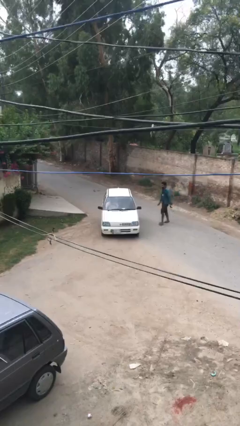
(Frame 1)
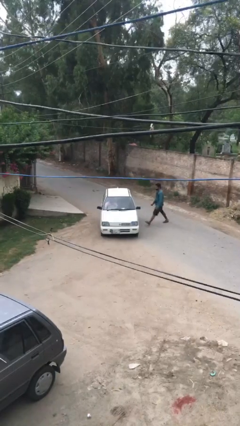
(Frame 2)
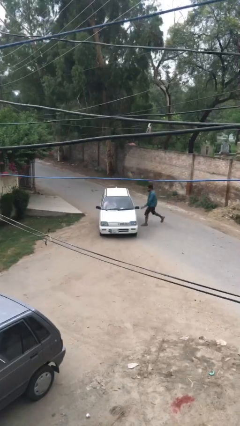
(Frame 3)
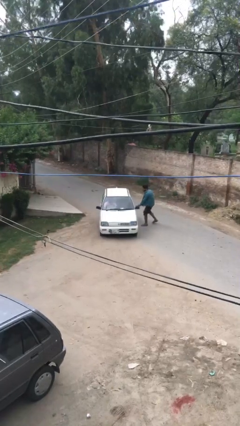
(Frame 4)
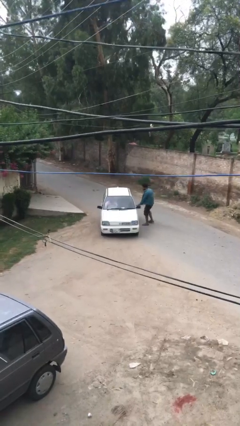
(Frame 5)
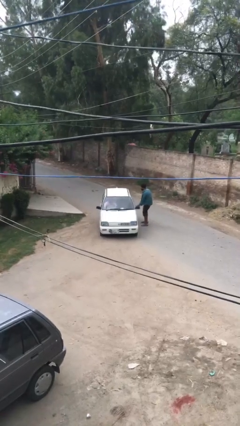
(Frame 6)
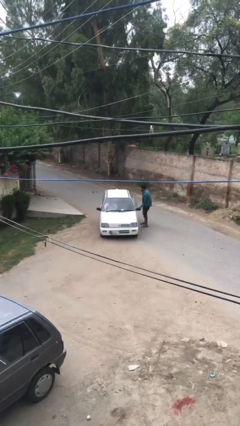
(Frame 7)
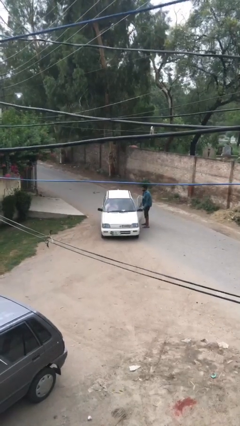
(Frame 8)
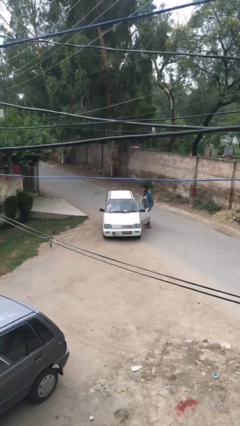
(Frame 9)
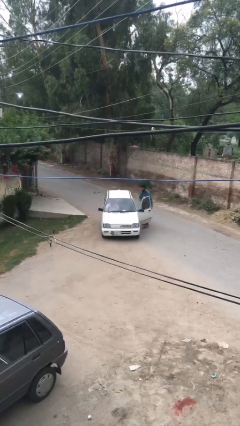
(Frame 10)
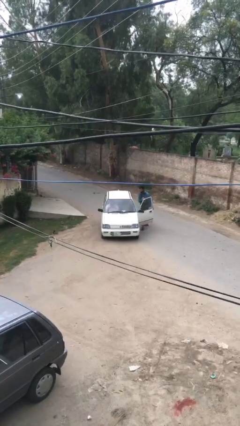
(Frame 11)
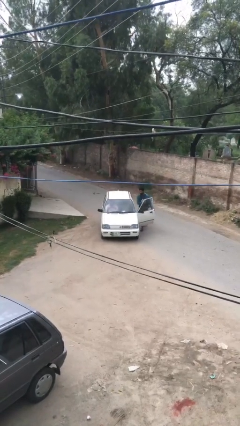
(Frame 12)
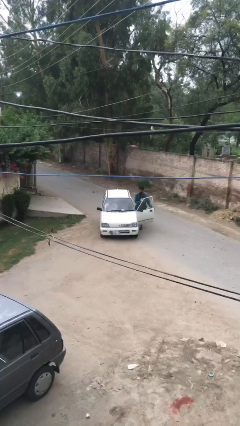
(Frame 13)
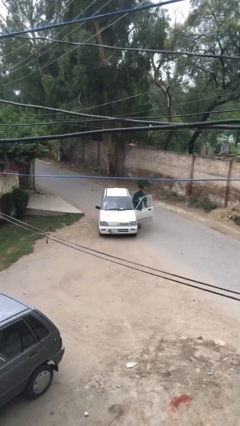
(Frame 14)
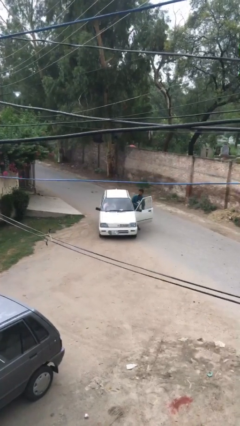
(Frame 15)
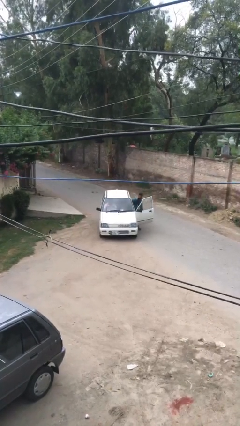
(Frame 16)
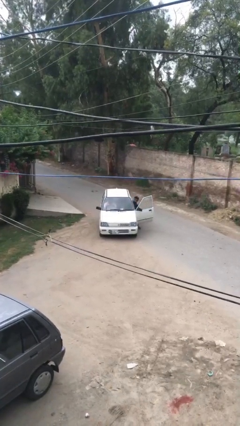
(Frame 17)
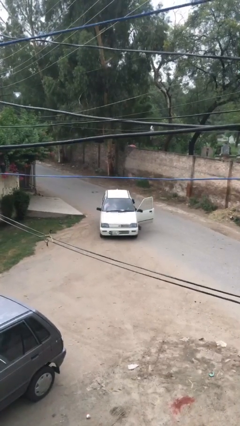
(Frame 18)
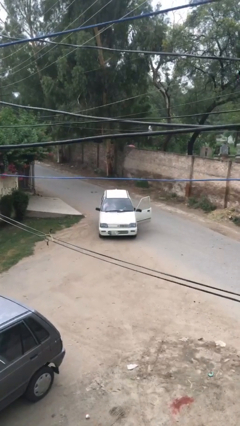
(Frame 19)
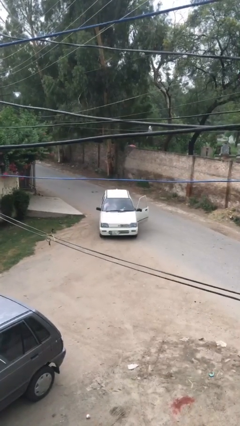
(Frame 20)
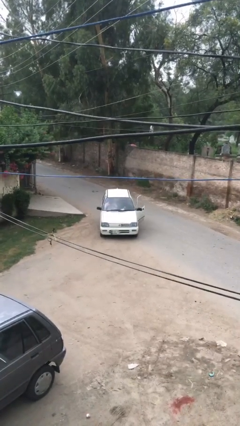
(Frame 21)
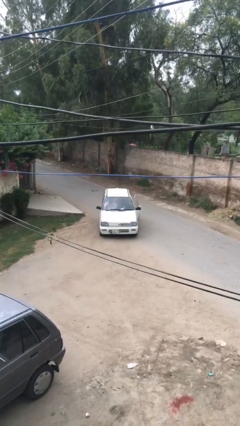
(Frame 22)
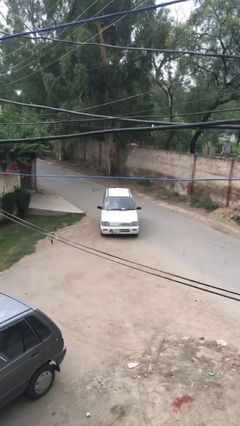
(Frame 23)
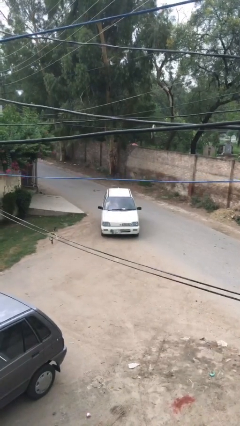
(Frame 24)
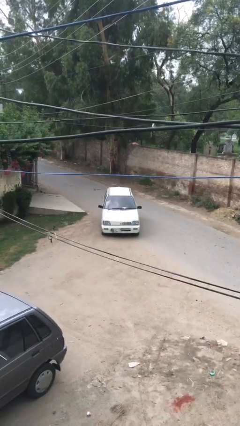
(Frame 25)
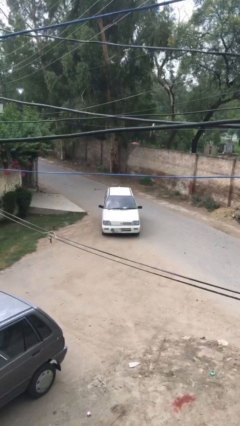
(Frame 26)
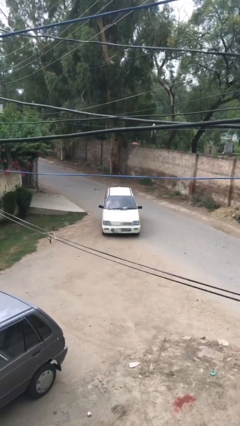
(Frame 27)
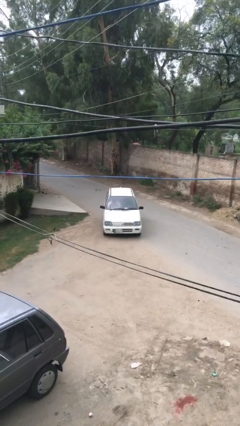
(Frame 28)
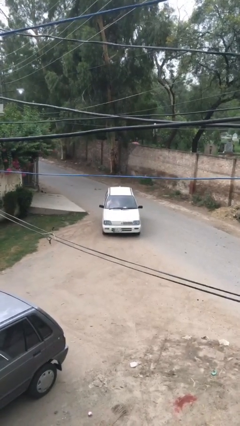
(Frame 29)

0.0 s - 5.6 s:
car picks up person

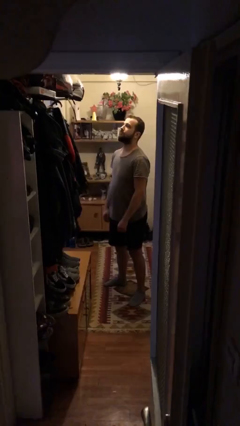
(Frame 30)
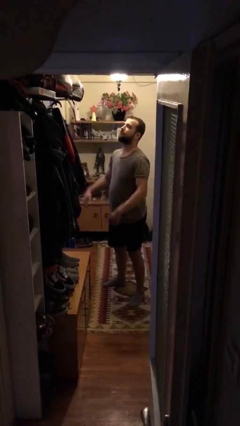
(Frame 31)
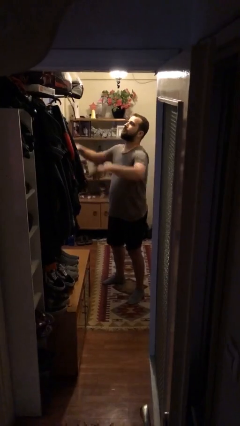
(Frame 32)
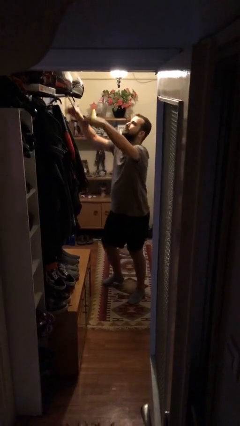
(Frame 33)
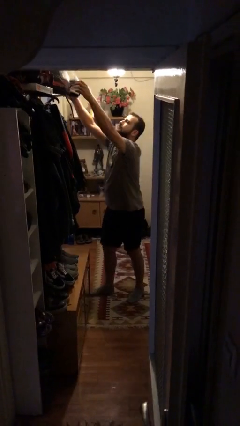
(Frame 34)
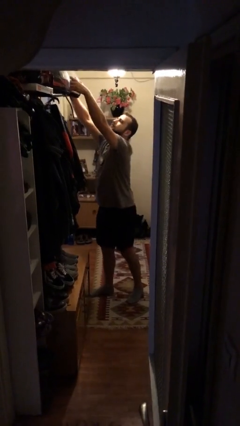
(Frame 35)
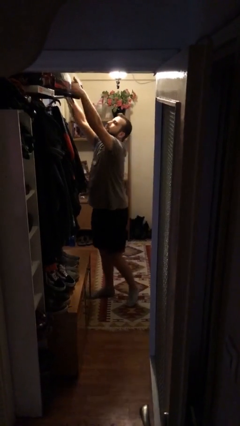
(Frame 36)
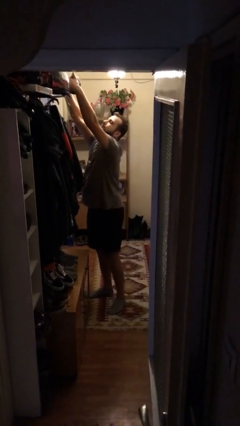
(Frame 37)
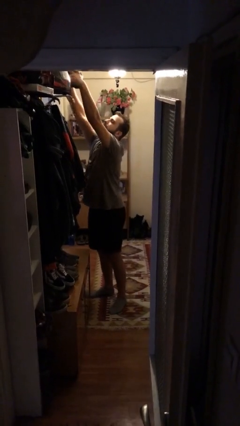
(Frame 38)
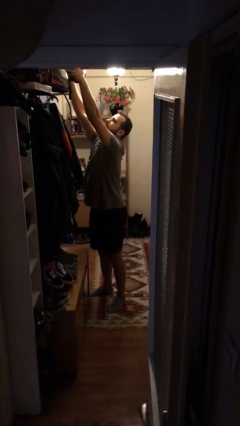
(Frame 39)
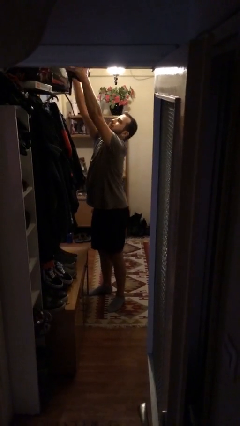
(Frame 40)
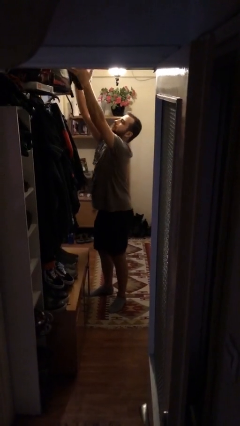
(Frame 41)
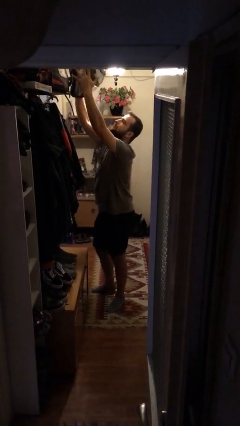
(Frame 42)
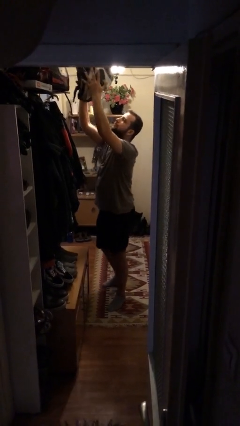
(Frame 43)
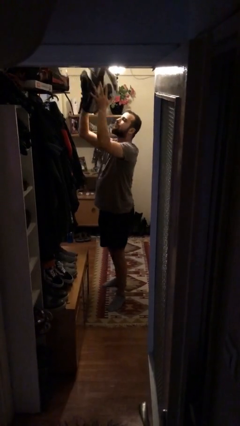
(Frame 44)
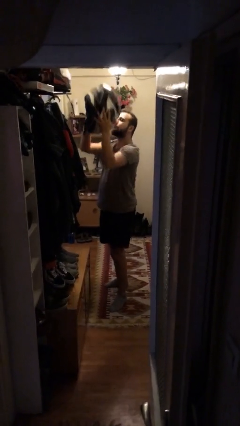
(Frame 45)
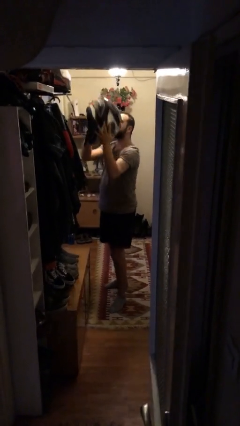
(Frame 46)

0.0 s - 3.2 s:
person picks up object from shelf

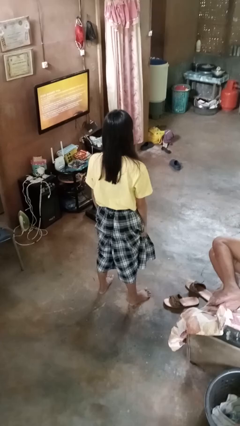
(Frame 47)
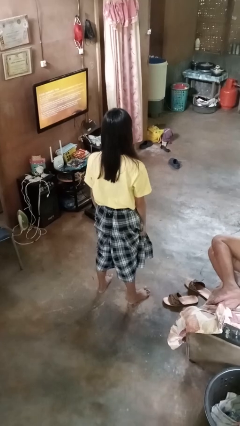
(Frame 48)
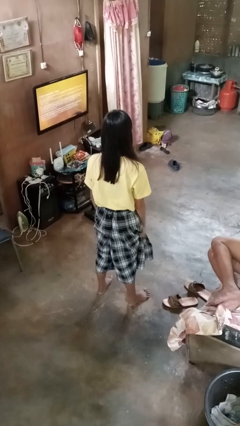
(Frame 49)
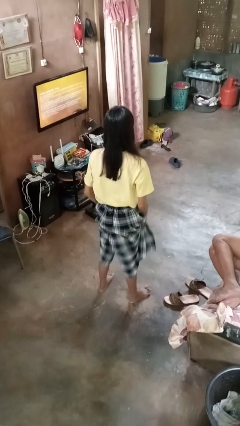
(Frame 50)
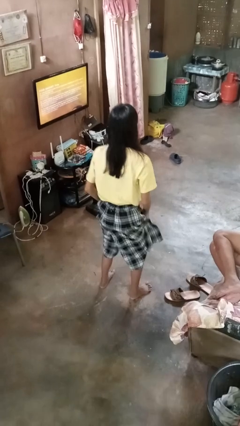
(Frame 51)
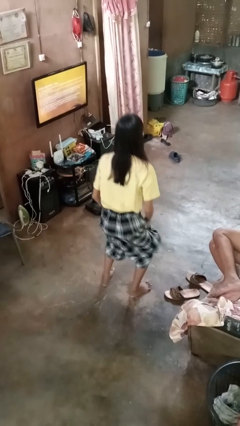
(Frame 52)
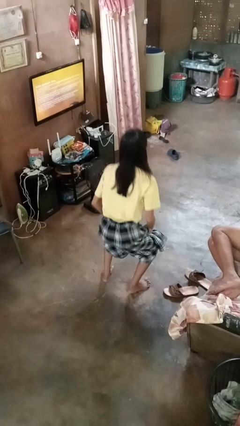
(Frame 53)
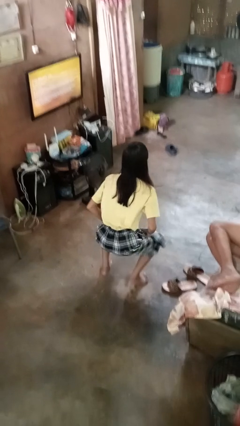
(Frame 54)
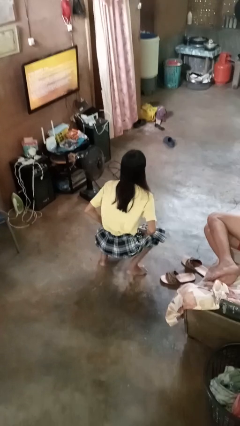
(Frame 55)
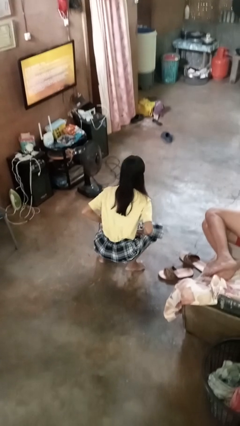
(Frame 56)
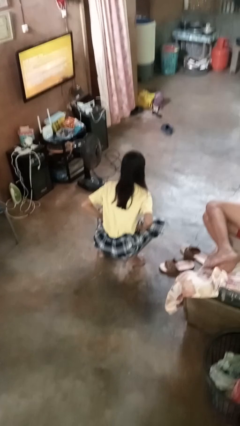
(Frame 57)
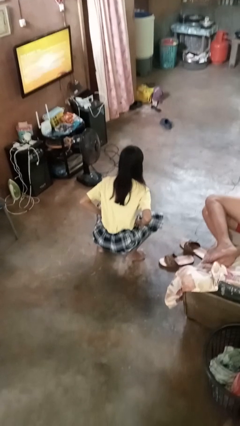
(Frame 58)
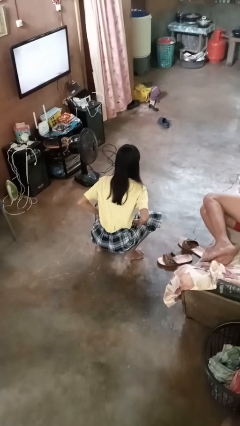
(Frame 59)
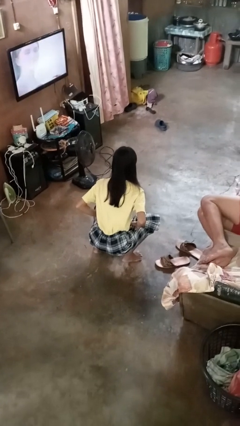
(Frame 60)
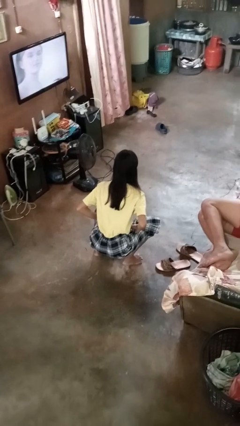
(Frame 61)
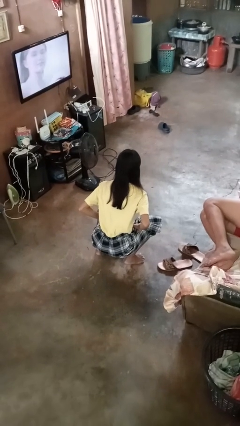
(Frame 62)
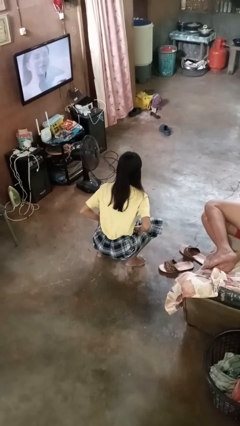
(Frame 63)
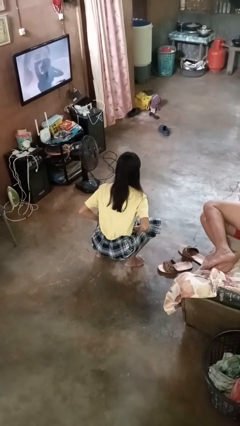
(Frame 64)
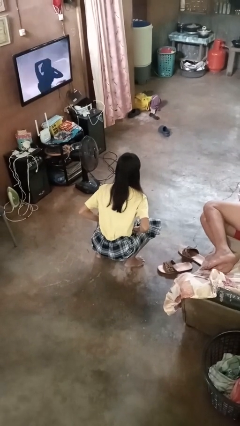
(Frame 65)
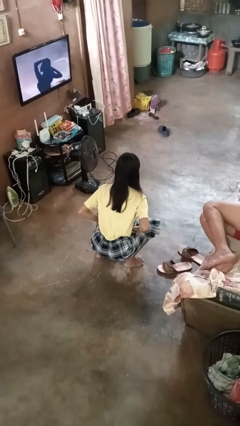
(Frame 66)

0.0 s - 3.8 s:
person squats

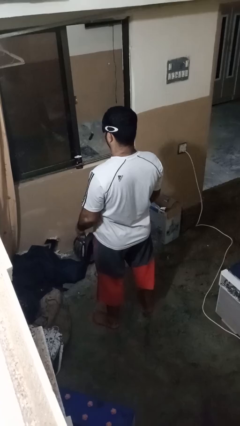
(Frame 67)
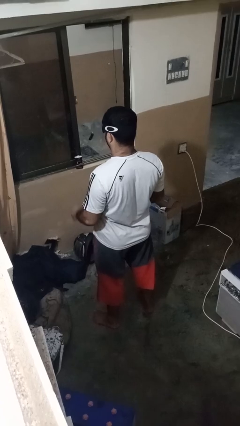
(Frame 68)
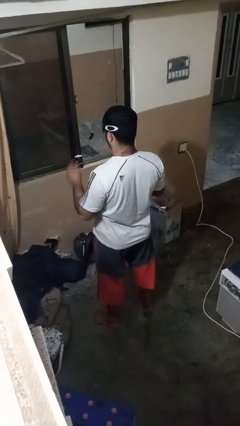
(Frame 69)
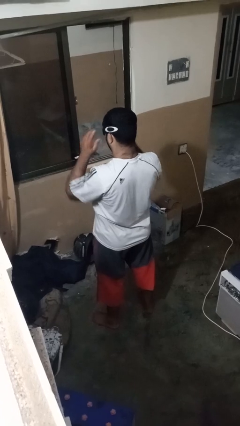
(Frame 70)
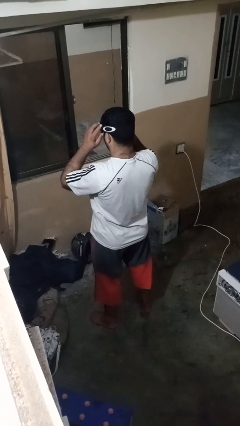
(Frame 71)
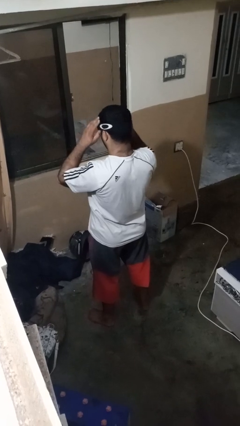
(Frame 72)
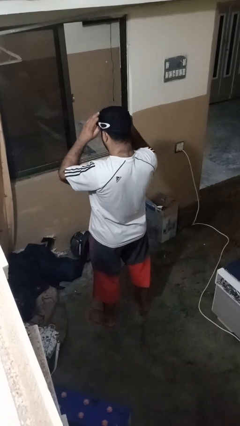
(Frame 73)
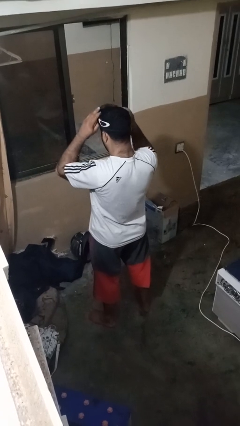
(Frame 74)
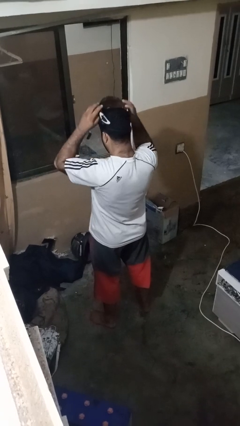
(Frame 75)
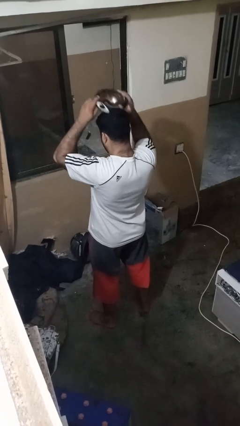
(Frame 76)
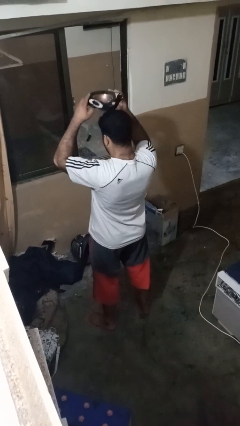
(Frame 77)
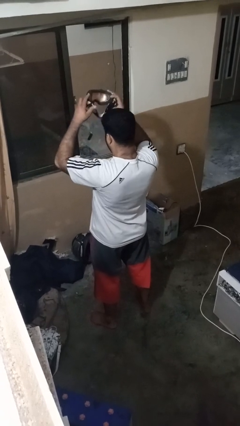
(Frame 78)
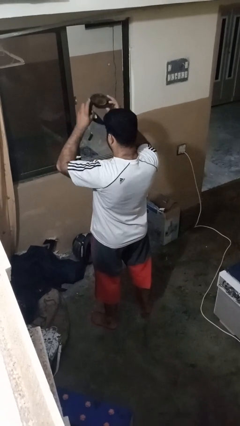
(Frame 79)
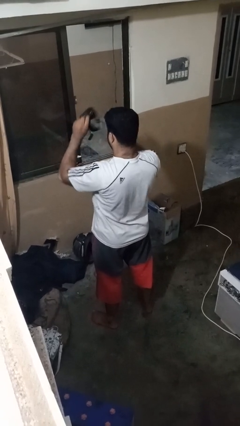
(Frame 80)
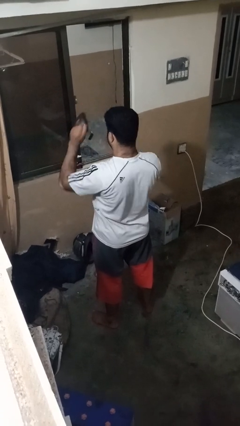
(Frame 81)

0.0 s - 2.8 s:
person takes off sunglasses

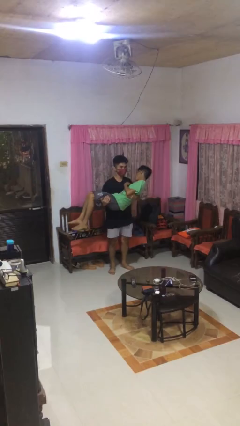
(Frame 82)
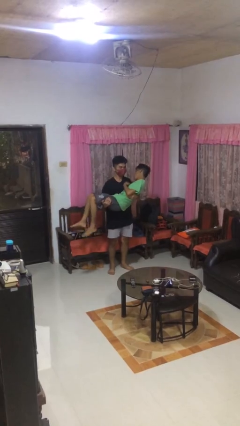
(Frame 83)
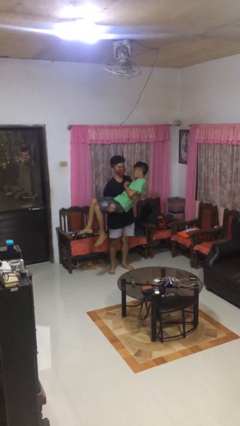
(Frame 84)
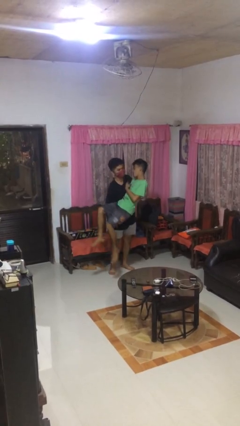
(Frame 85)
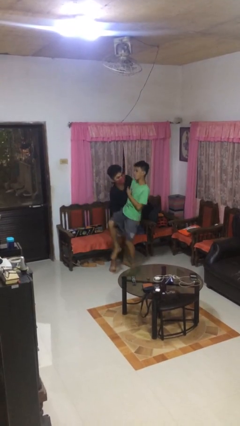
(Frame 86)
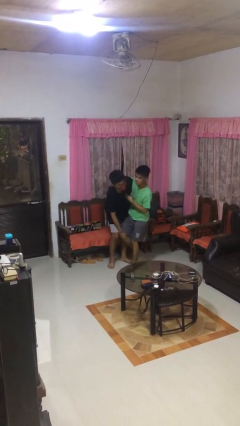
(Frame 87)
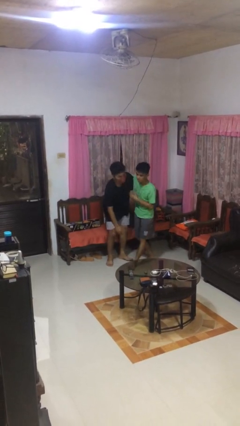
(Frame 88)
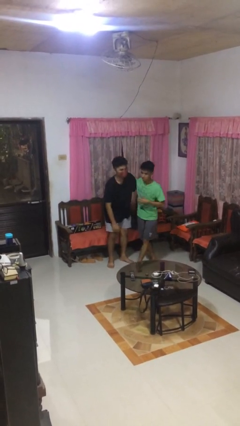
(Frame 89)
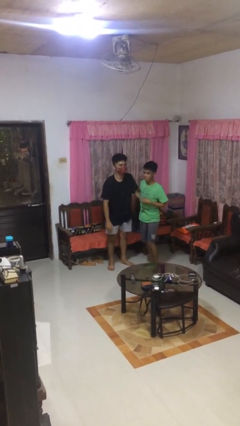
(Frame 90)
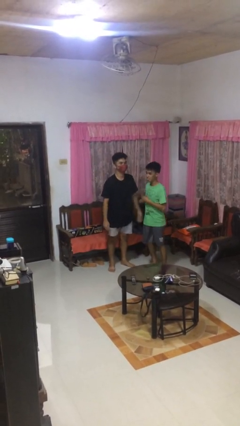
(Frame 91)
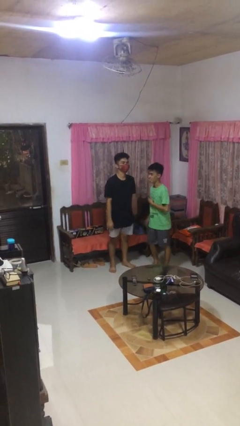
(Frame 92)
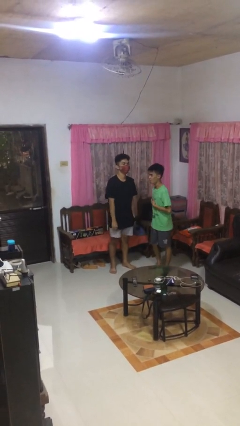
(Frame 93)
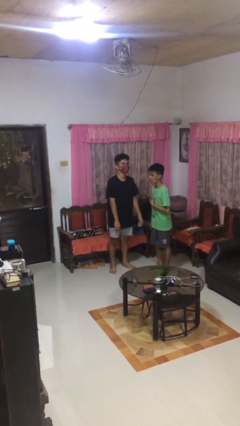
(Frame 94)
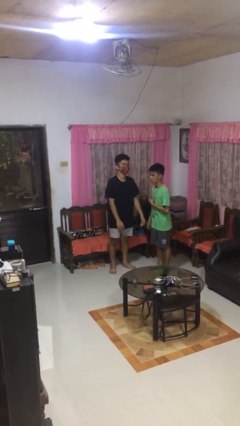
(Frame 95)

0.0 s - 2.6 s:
person puts down person
